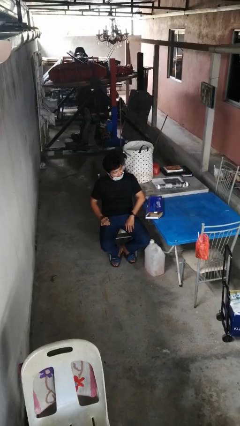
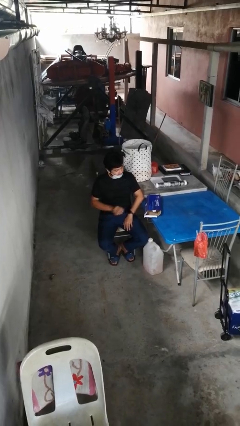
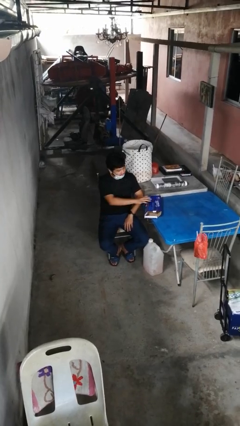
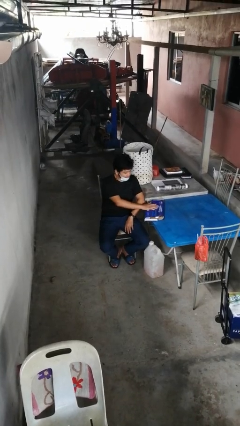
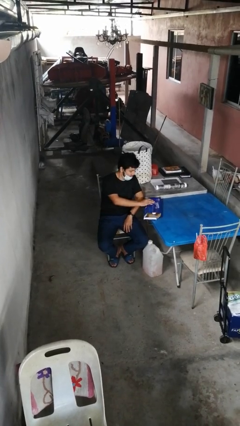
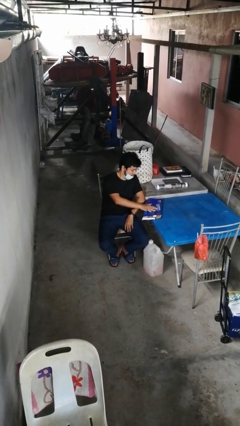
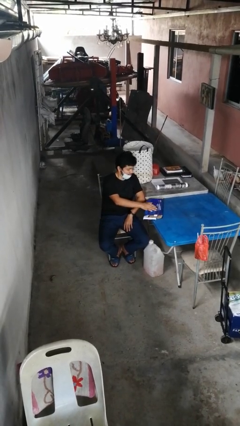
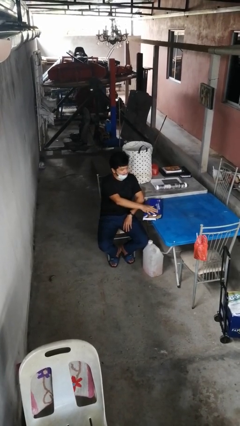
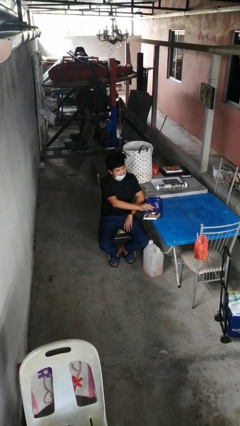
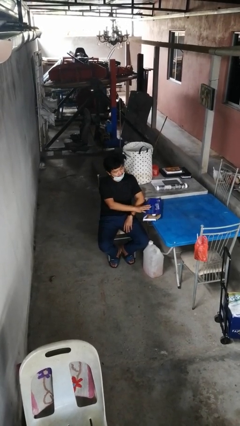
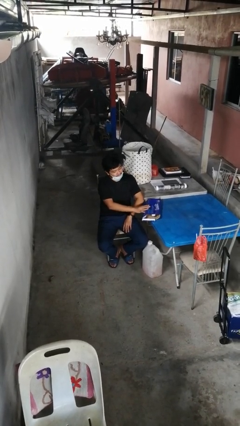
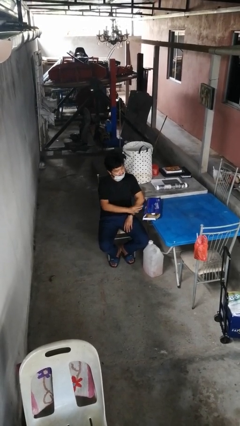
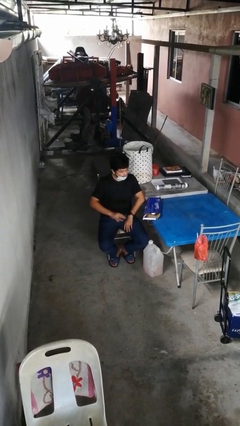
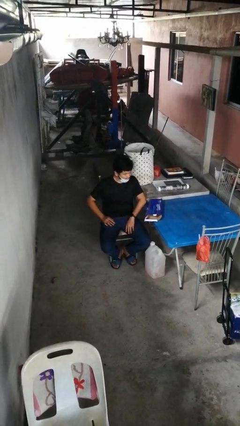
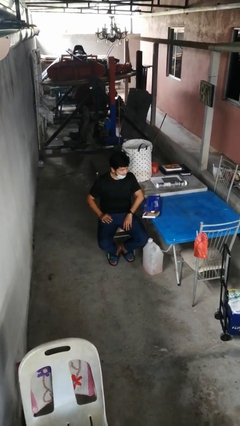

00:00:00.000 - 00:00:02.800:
person taps object with finger

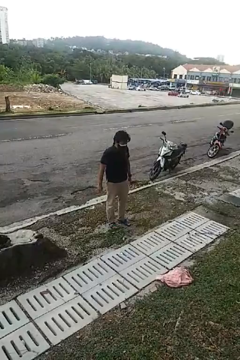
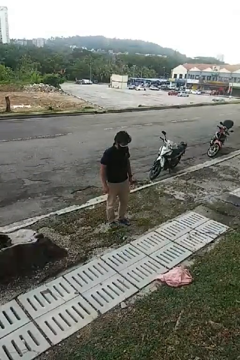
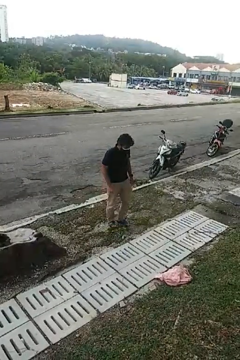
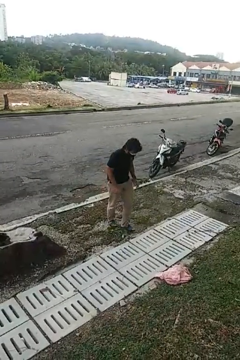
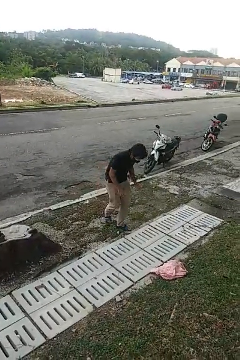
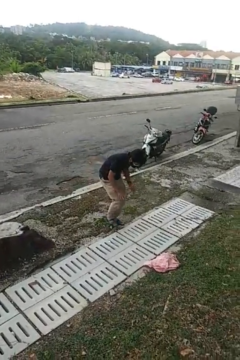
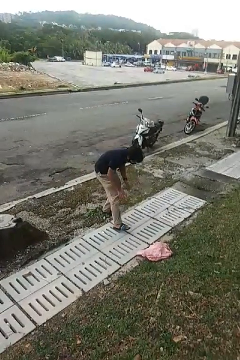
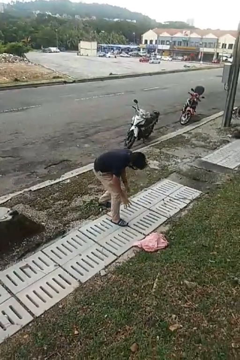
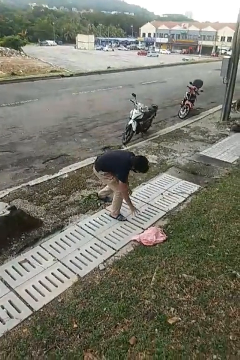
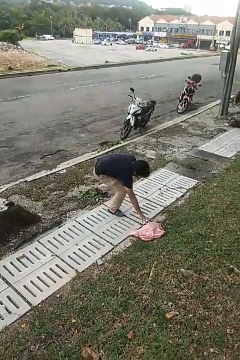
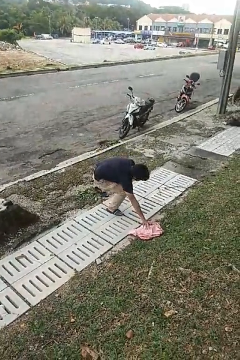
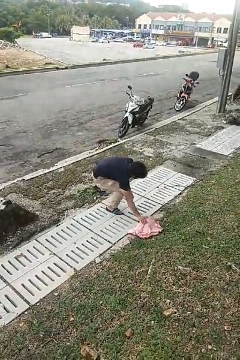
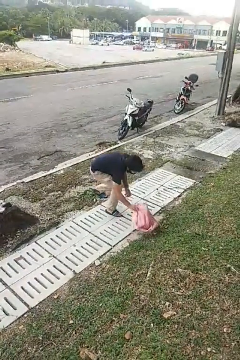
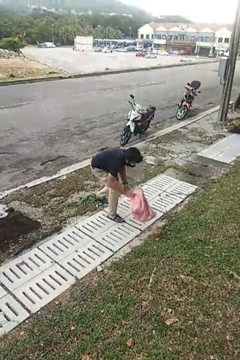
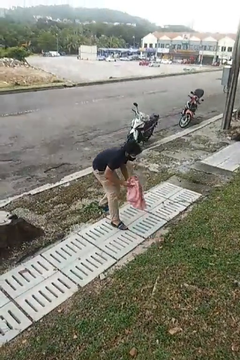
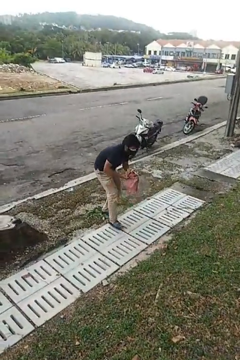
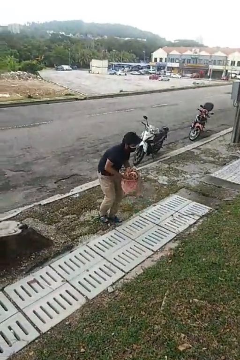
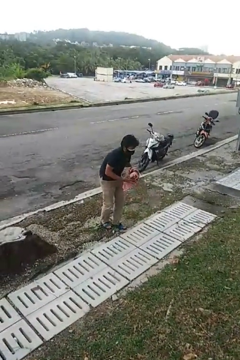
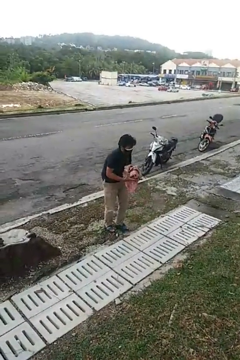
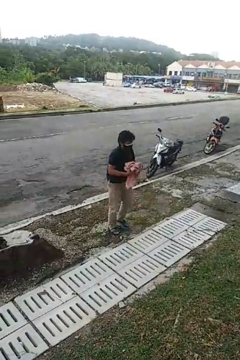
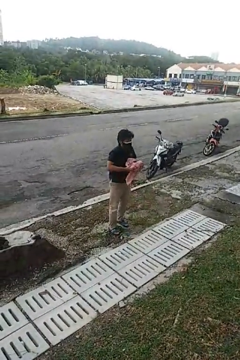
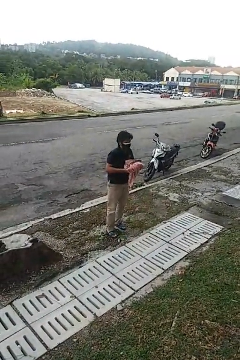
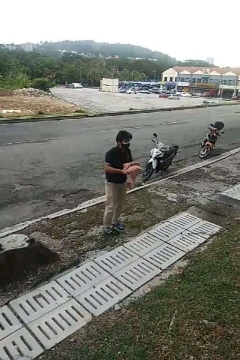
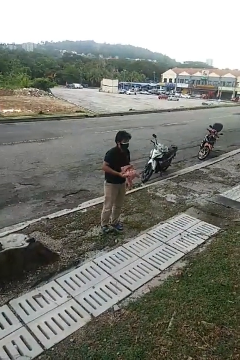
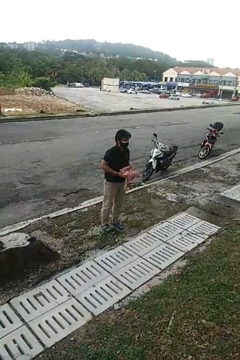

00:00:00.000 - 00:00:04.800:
person picks up object from floor

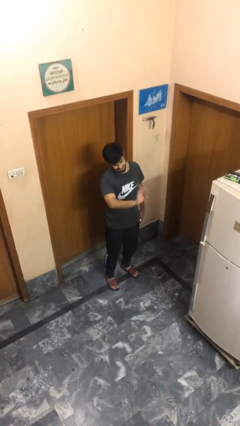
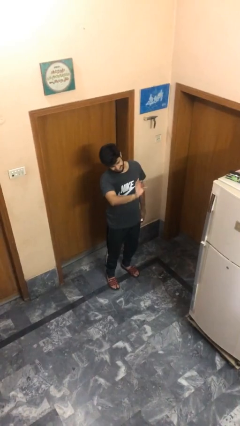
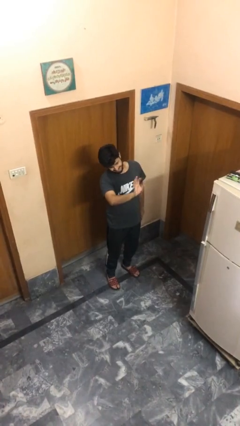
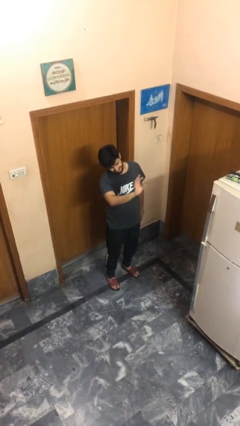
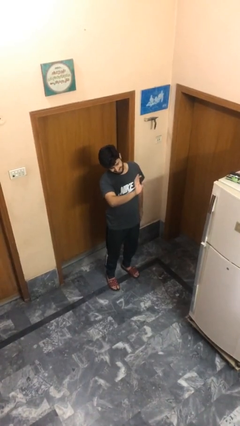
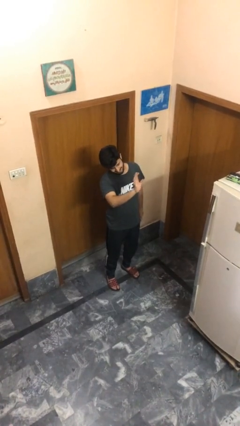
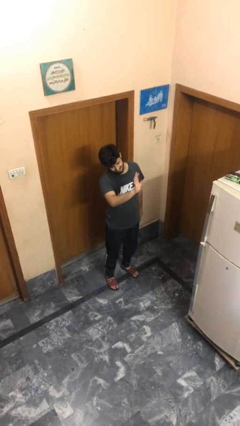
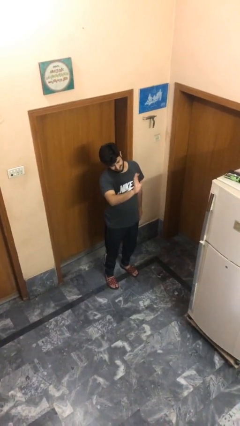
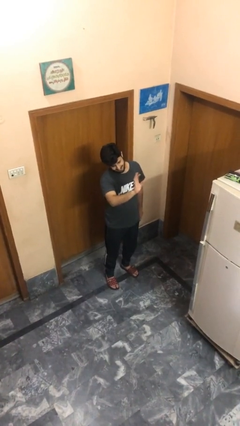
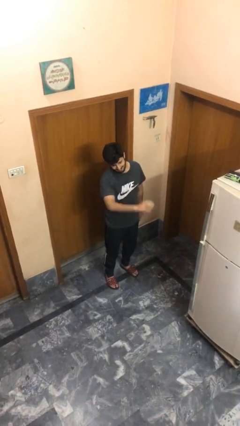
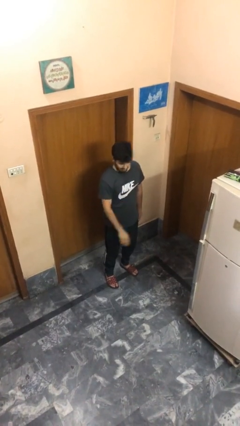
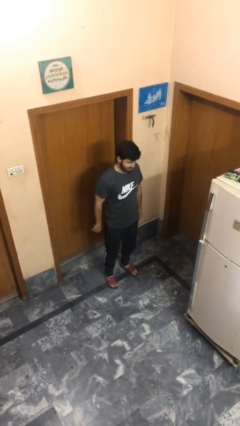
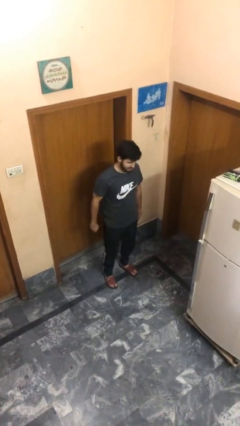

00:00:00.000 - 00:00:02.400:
person waves at person

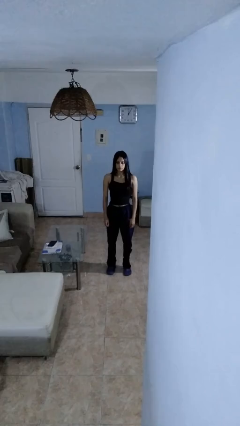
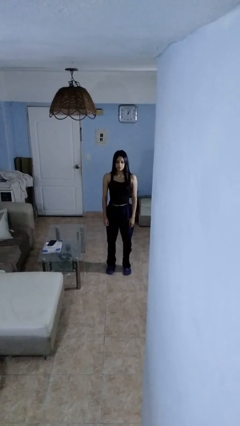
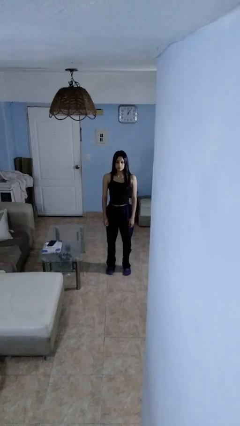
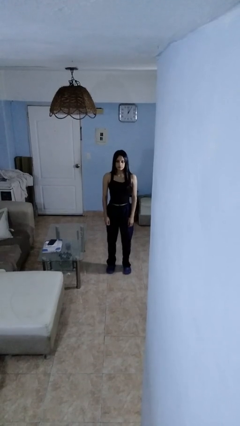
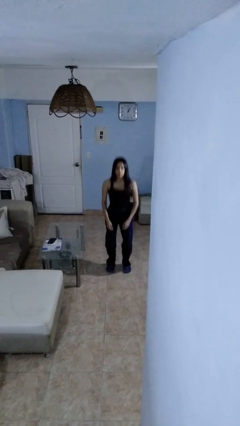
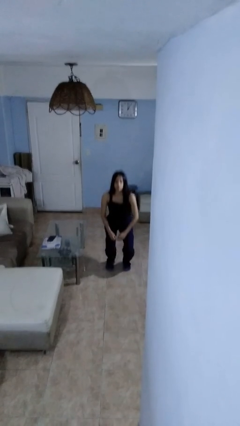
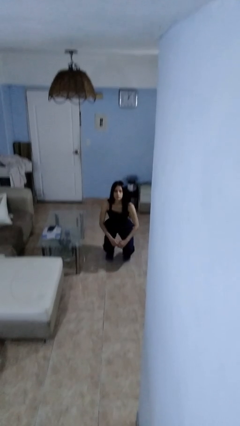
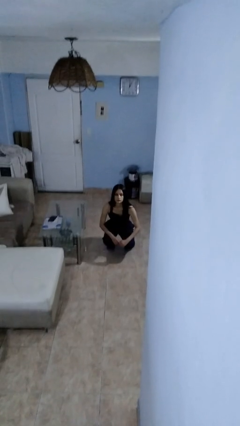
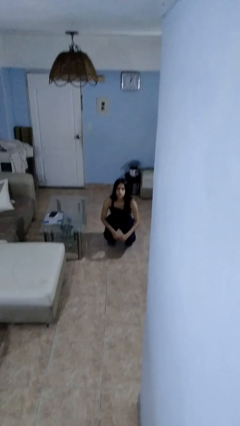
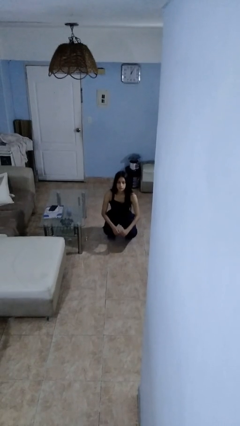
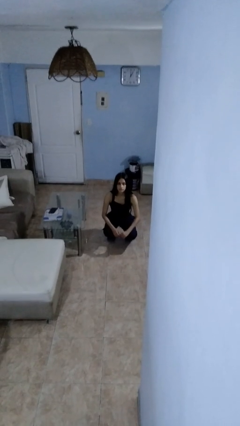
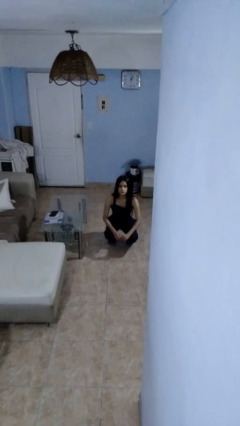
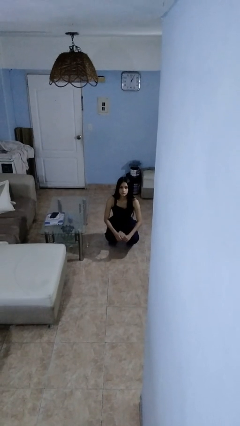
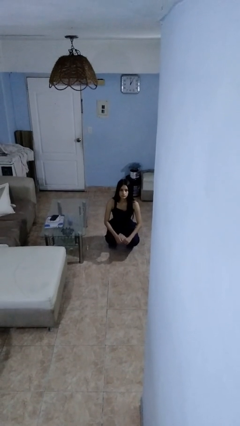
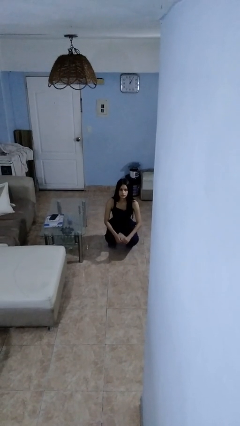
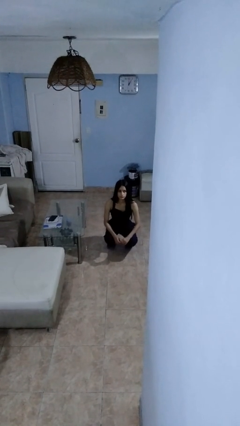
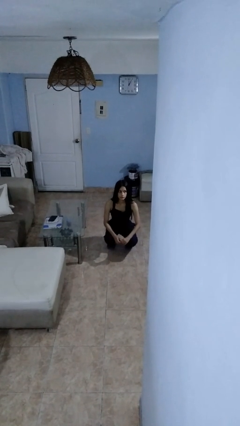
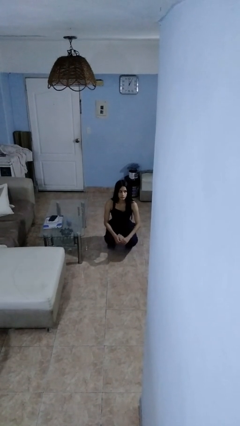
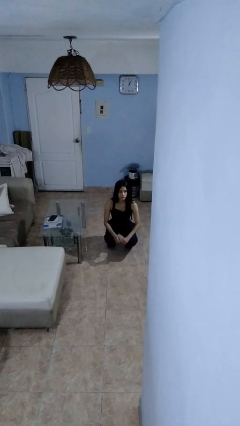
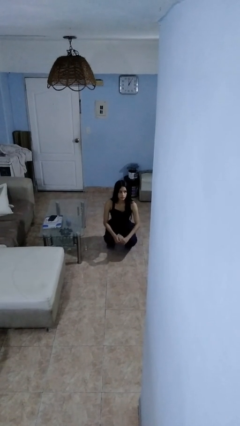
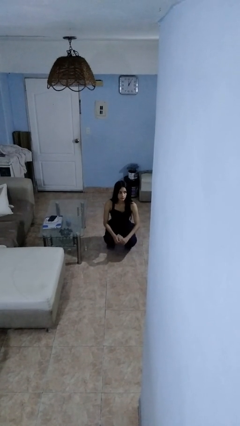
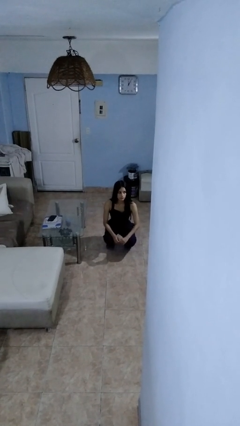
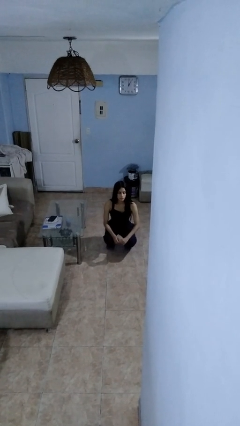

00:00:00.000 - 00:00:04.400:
person squats

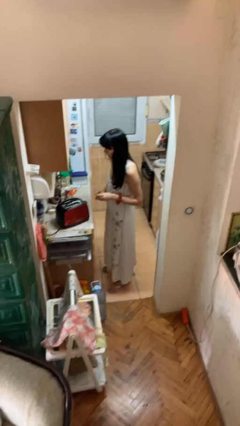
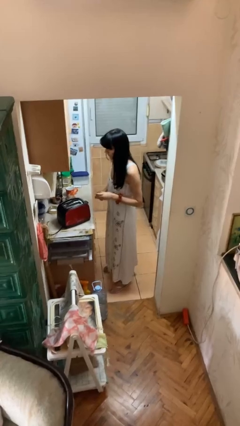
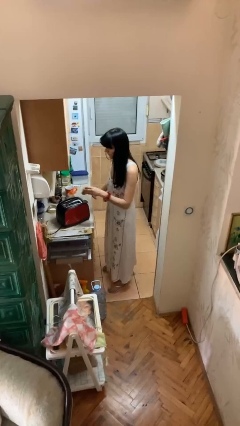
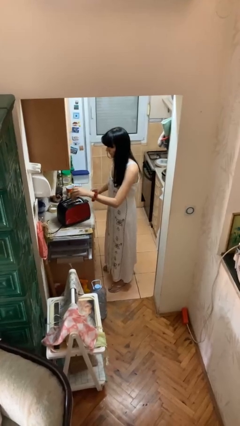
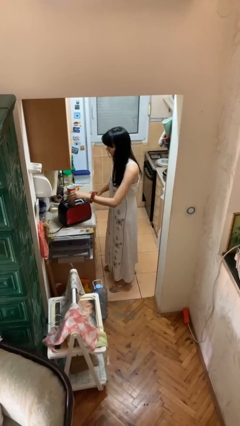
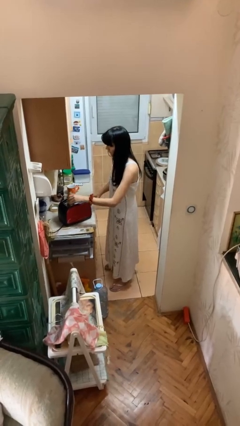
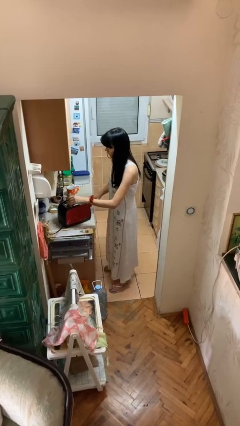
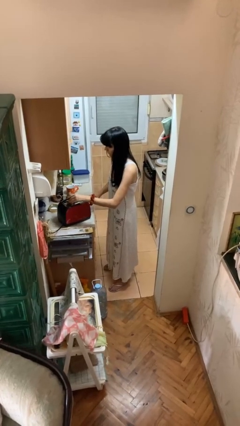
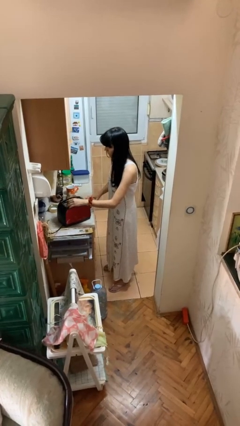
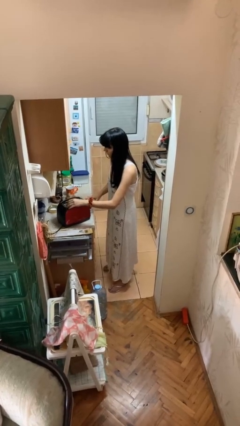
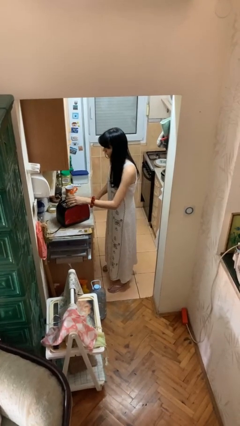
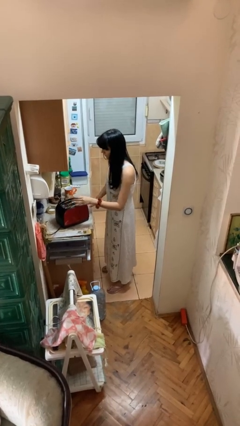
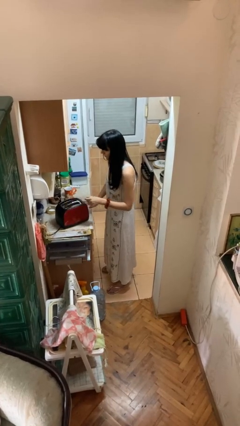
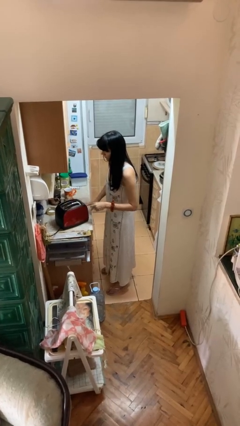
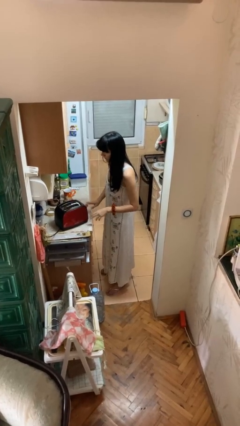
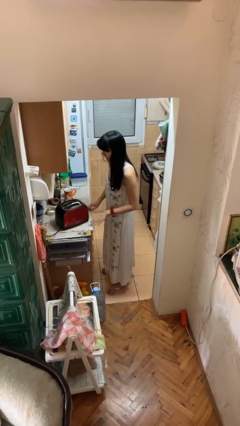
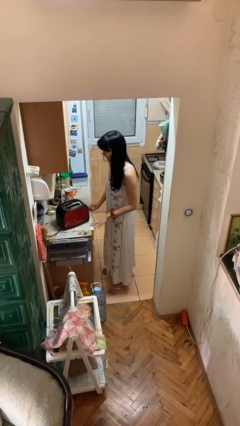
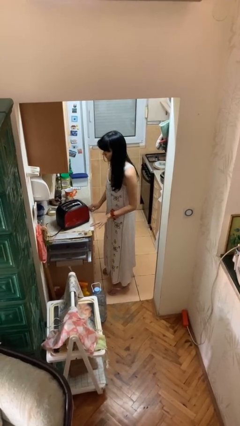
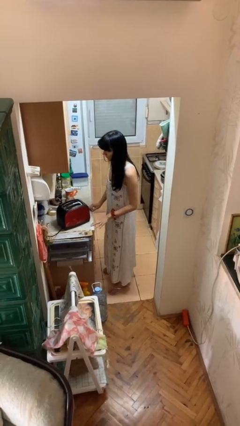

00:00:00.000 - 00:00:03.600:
person puts object into toaster

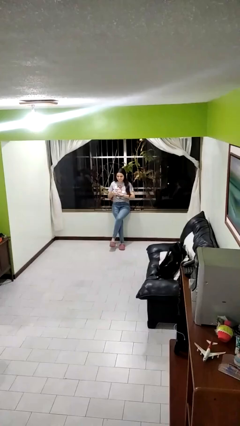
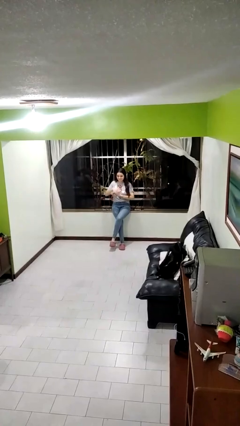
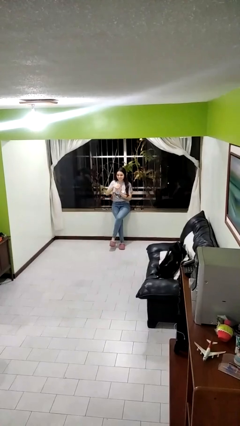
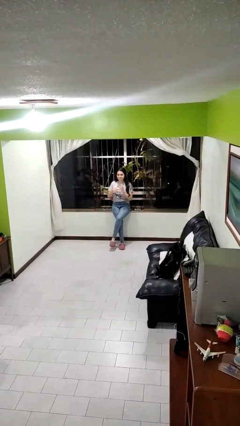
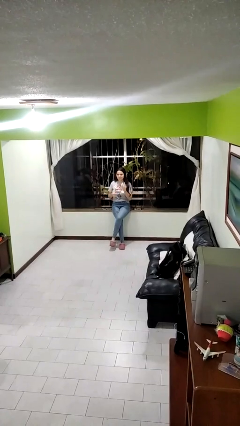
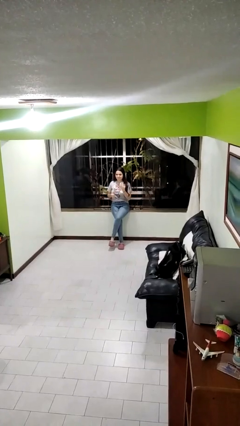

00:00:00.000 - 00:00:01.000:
person puts on ring
